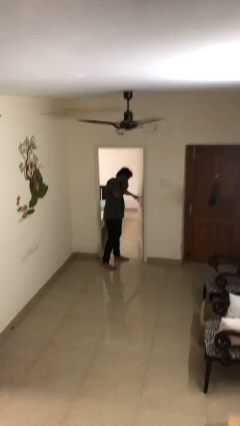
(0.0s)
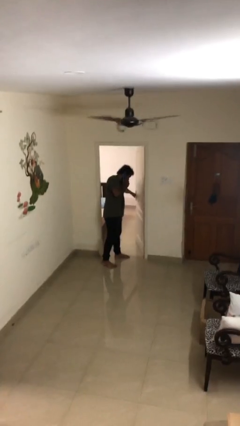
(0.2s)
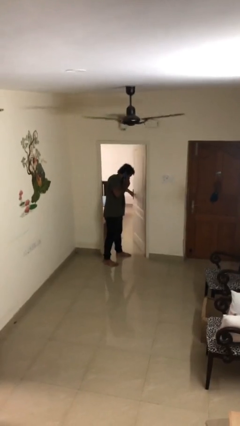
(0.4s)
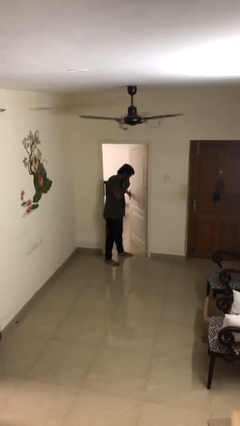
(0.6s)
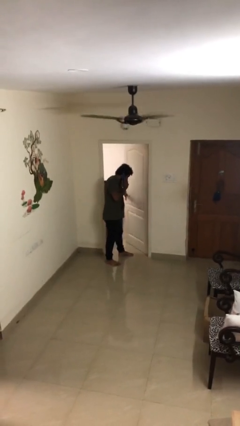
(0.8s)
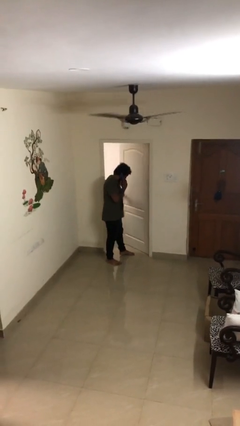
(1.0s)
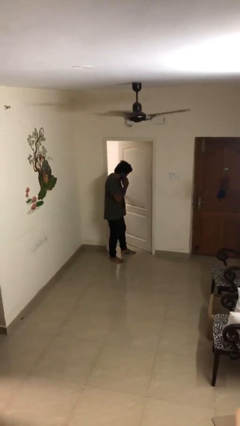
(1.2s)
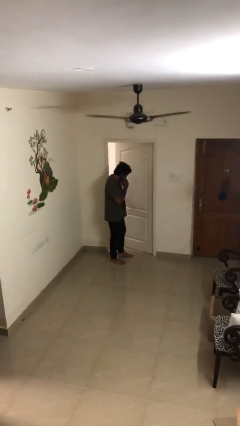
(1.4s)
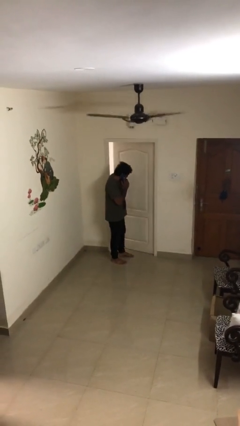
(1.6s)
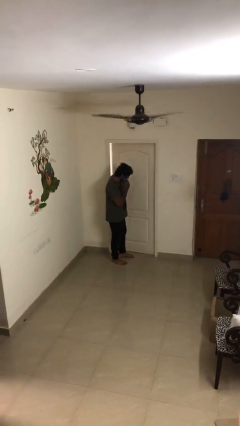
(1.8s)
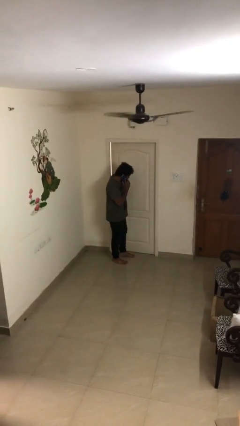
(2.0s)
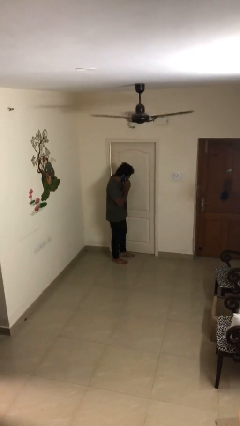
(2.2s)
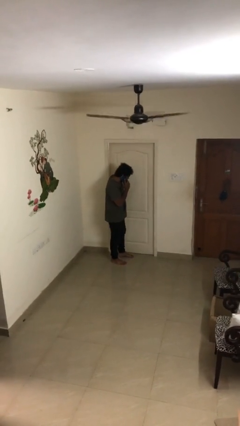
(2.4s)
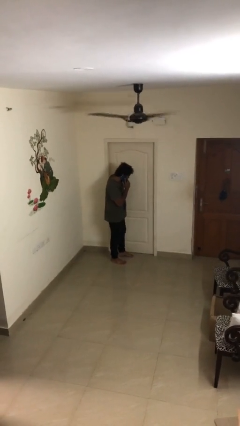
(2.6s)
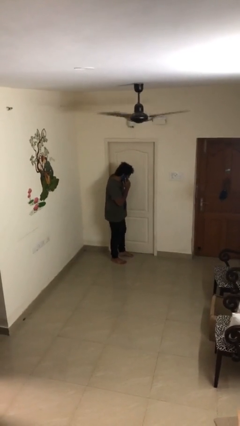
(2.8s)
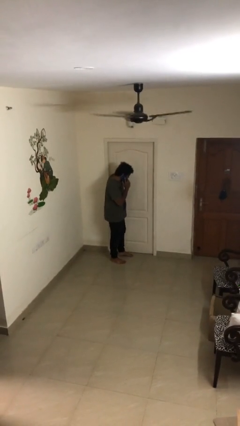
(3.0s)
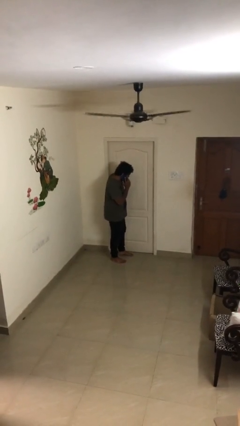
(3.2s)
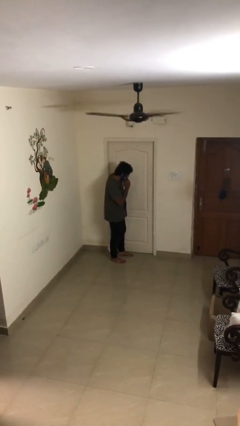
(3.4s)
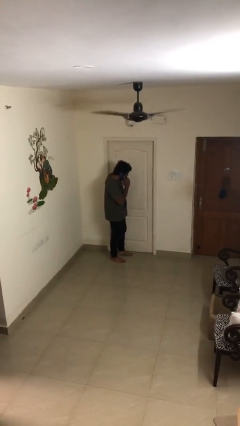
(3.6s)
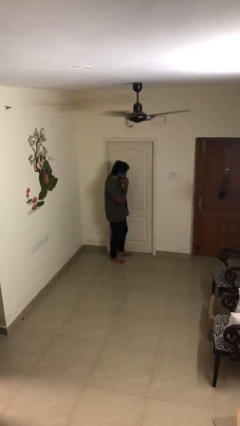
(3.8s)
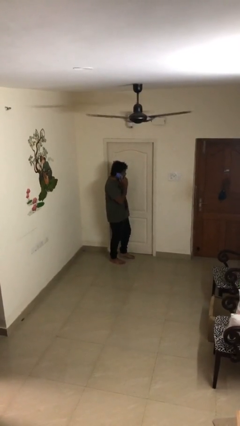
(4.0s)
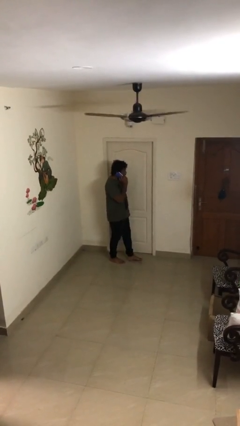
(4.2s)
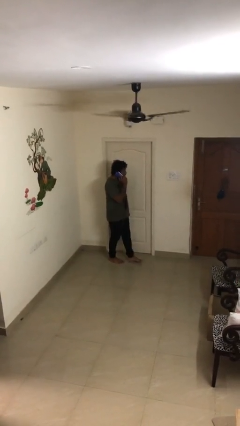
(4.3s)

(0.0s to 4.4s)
person closes facility door

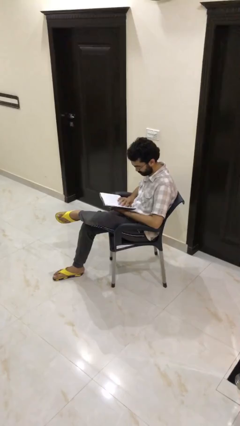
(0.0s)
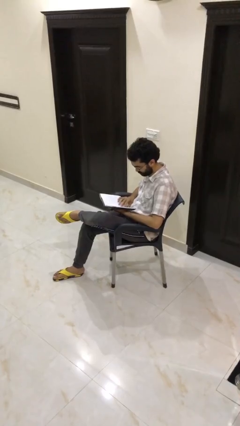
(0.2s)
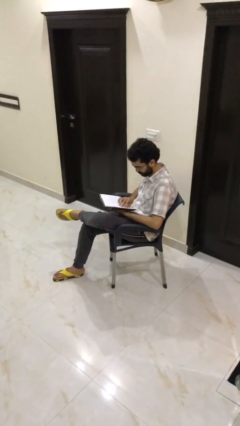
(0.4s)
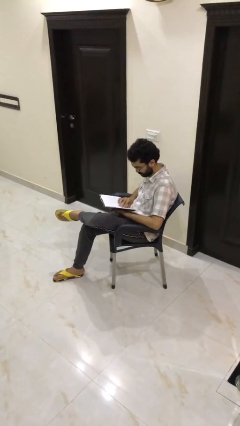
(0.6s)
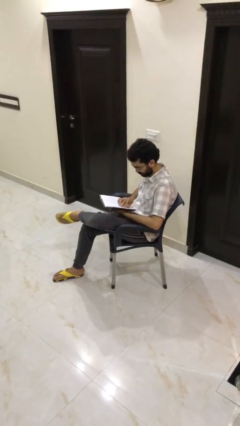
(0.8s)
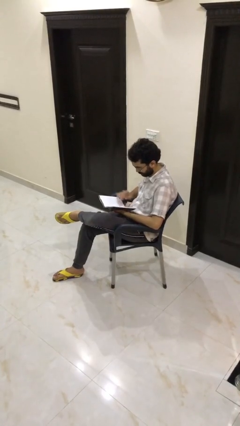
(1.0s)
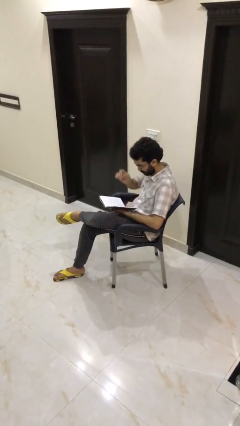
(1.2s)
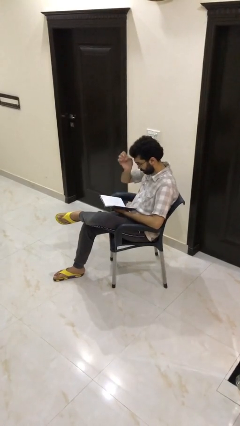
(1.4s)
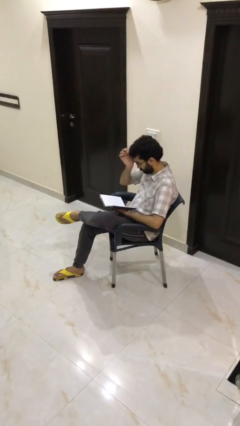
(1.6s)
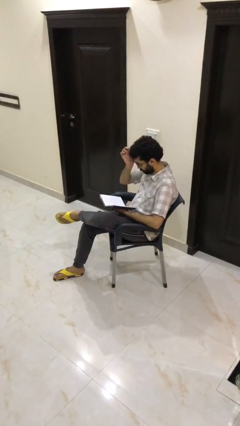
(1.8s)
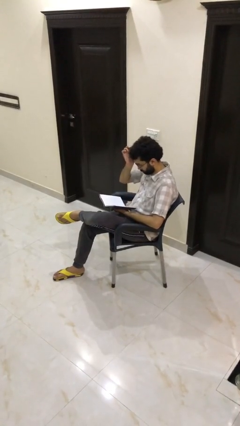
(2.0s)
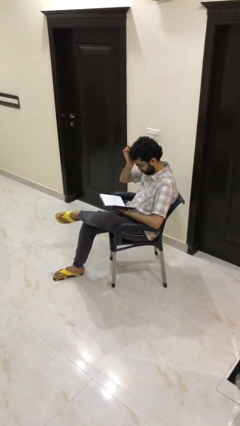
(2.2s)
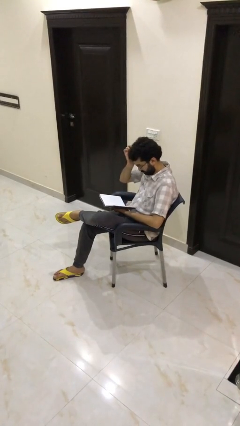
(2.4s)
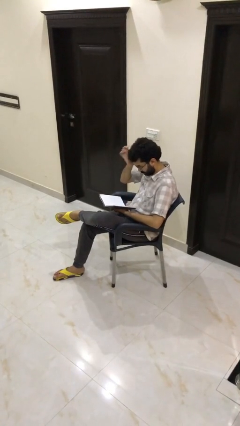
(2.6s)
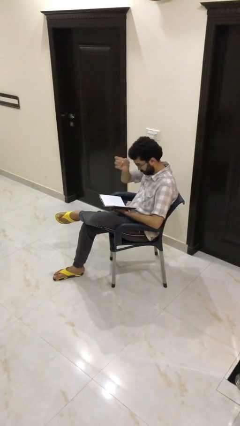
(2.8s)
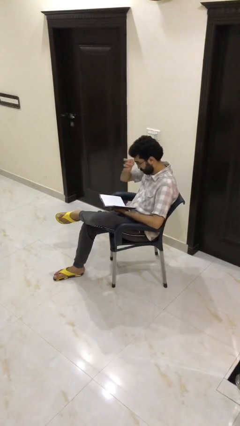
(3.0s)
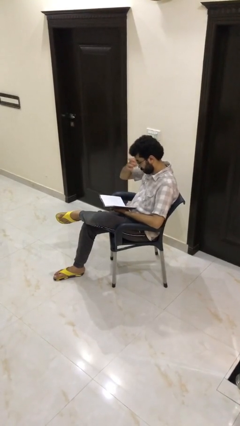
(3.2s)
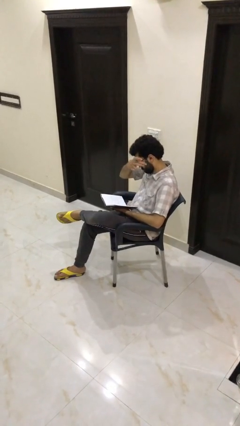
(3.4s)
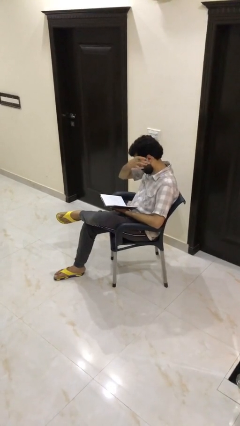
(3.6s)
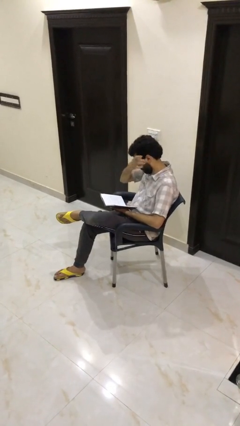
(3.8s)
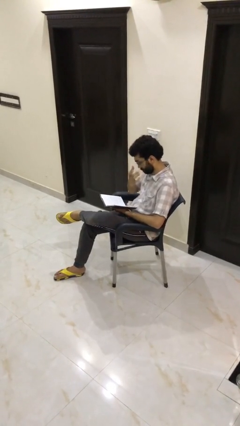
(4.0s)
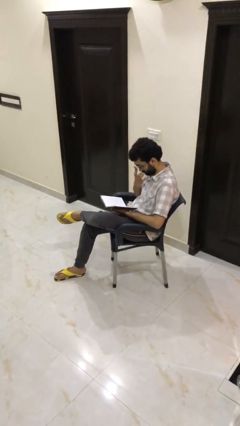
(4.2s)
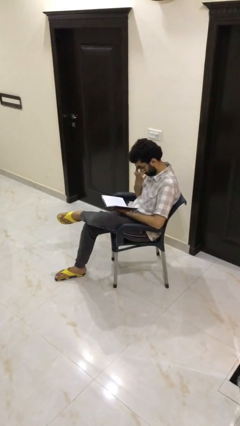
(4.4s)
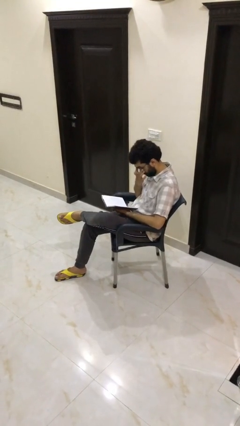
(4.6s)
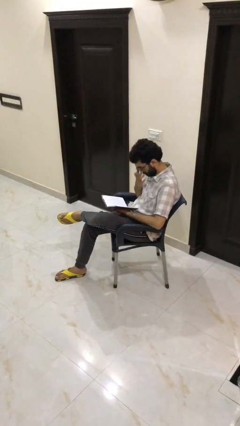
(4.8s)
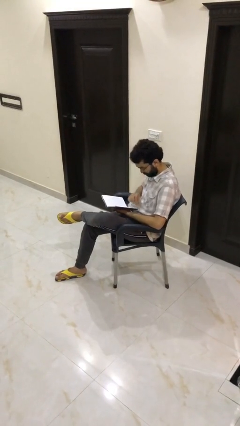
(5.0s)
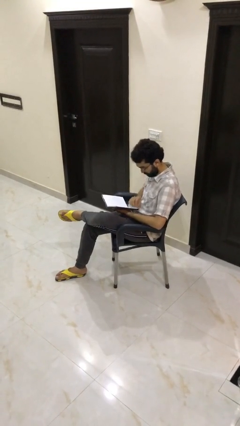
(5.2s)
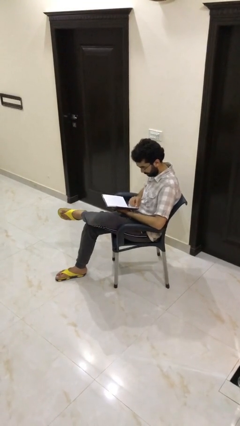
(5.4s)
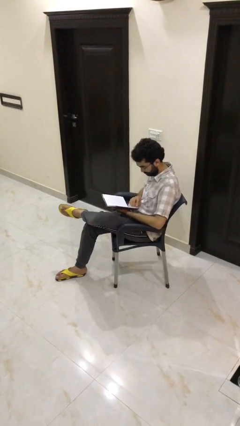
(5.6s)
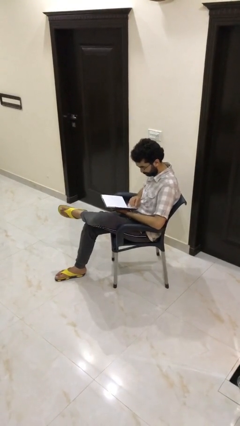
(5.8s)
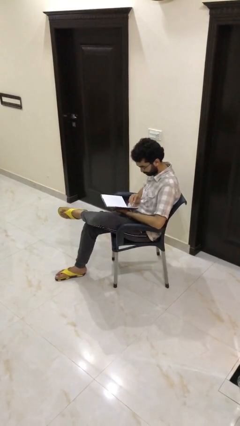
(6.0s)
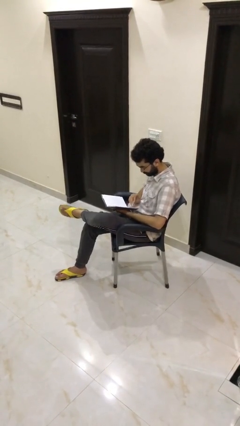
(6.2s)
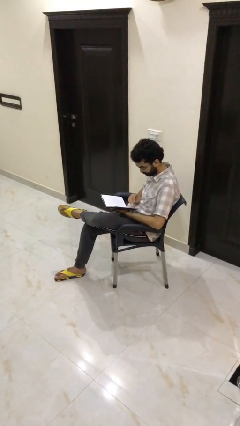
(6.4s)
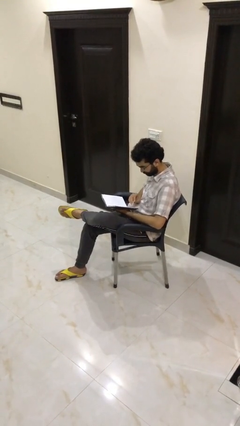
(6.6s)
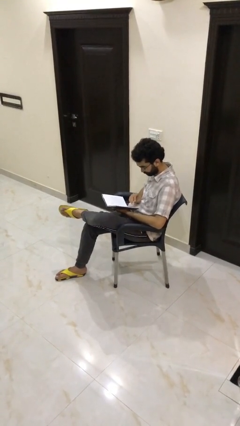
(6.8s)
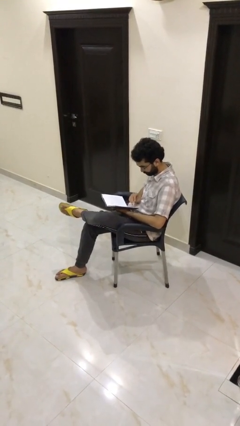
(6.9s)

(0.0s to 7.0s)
person reads document

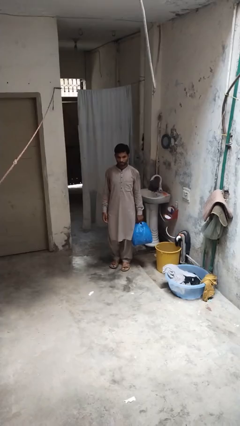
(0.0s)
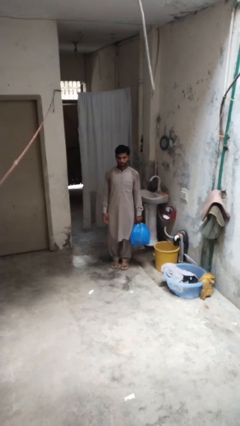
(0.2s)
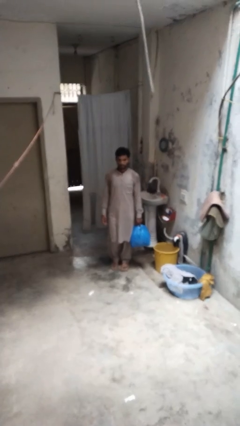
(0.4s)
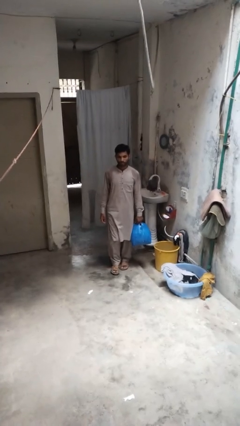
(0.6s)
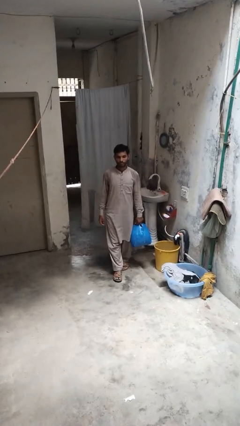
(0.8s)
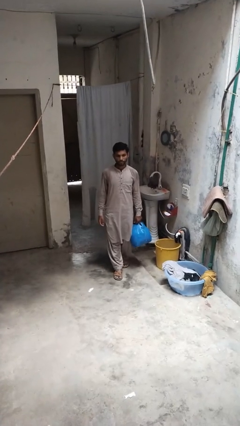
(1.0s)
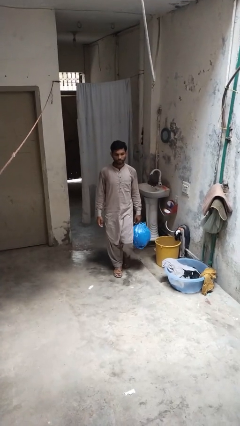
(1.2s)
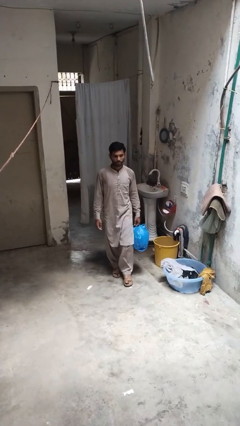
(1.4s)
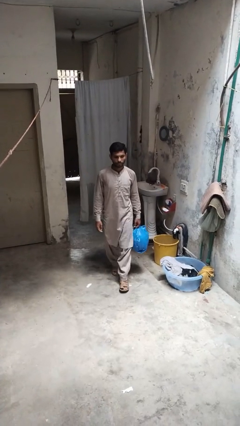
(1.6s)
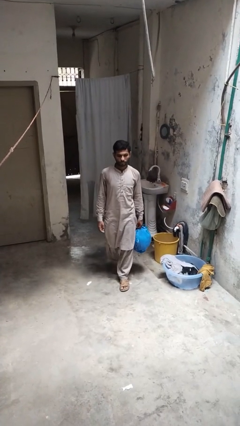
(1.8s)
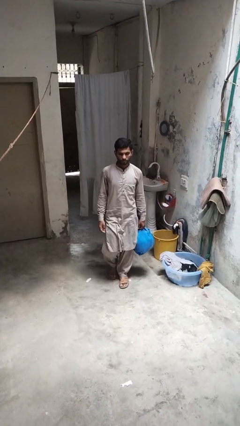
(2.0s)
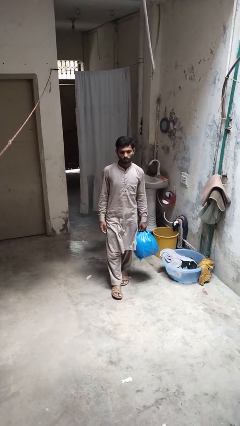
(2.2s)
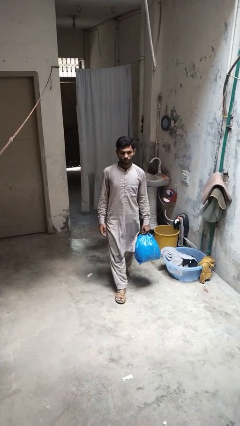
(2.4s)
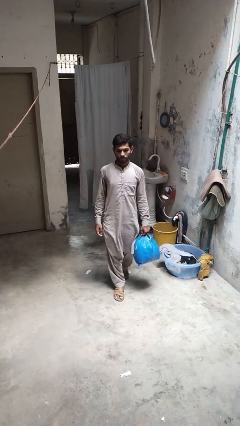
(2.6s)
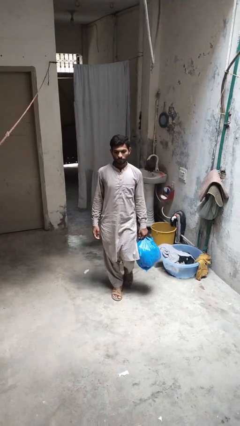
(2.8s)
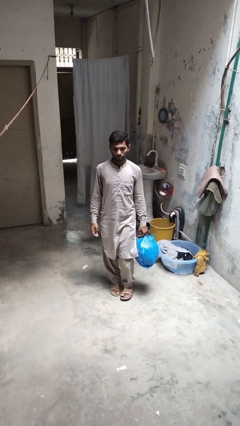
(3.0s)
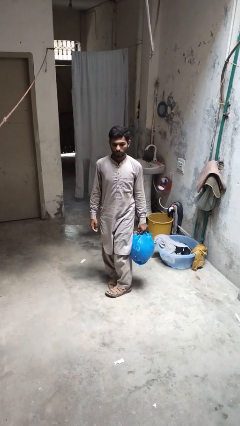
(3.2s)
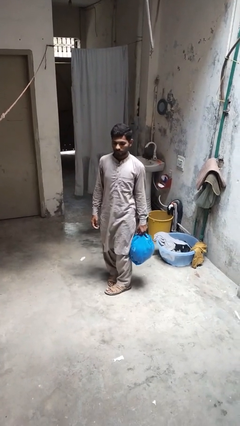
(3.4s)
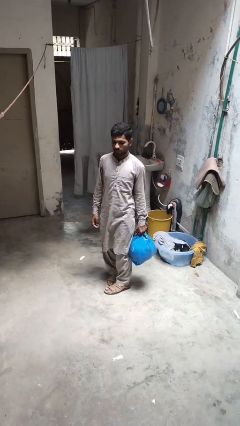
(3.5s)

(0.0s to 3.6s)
person carries groceries

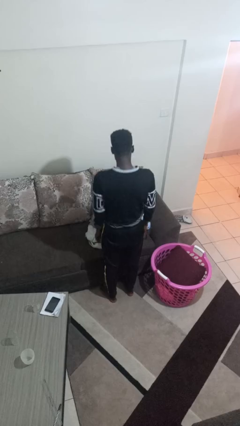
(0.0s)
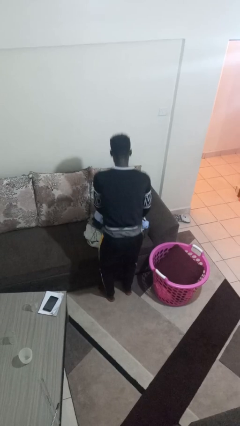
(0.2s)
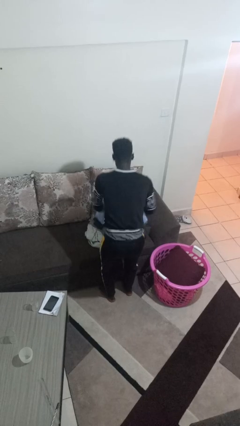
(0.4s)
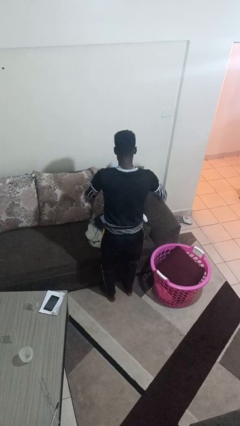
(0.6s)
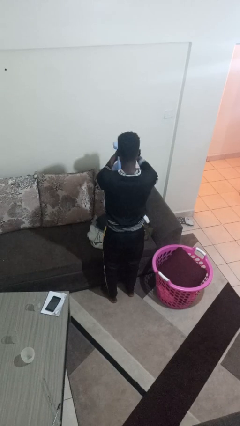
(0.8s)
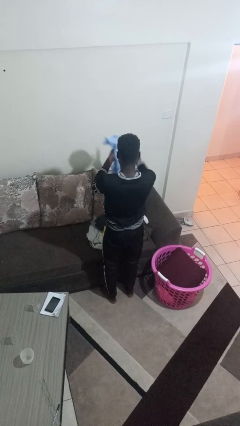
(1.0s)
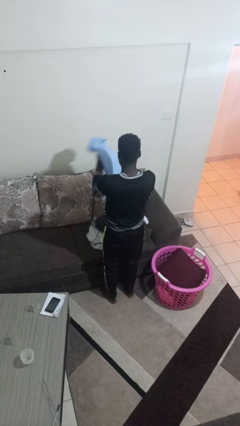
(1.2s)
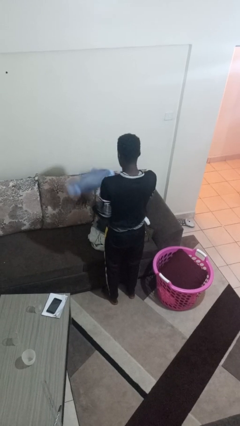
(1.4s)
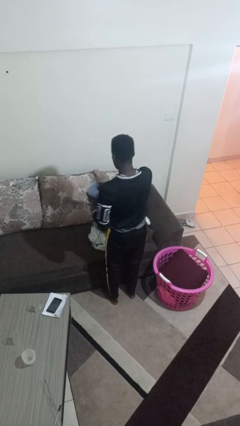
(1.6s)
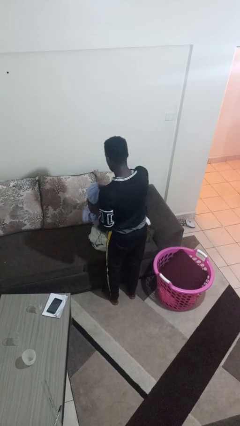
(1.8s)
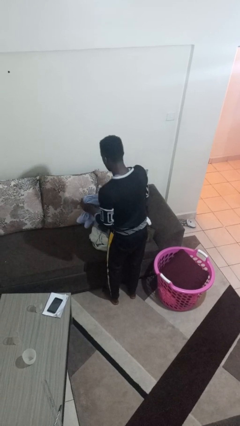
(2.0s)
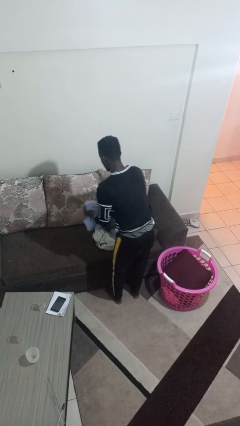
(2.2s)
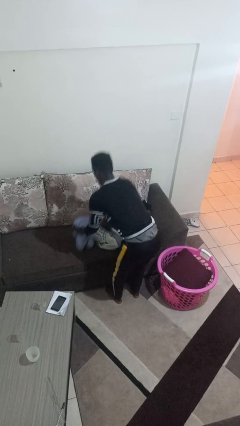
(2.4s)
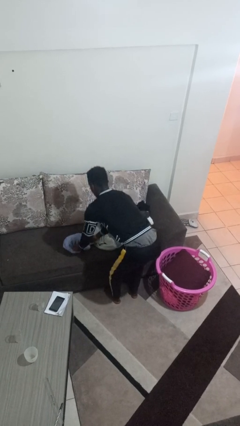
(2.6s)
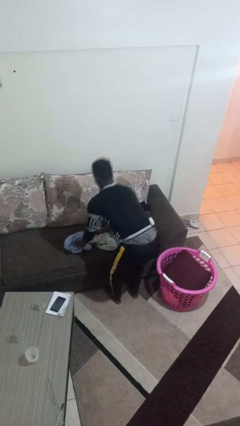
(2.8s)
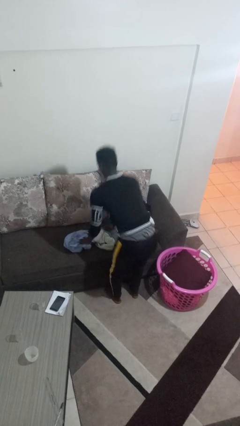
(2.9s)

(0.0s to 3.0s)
person folds shirt
